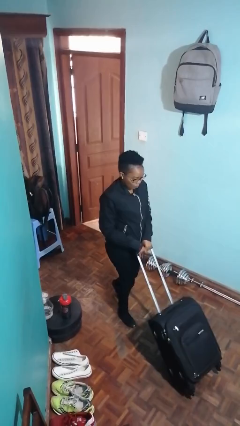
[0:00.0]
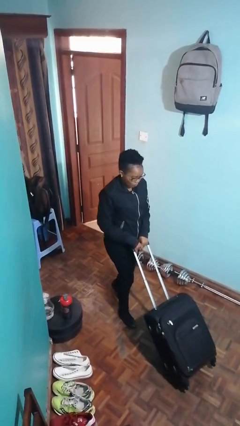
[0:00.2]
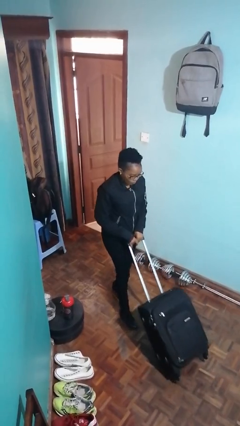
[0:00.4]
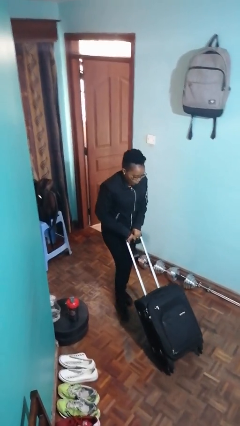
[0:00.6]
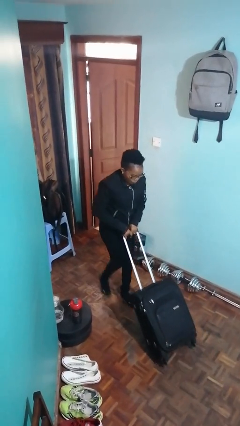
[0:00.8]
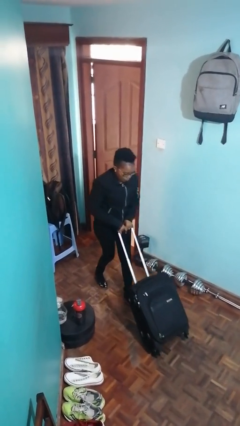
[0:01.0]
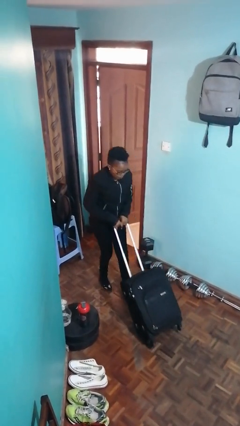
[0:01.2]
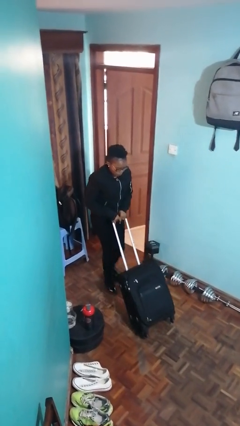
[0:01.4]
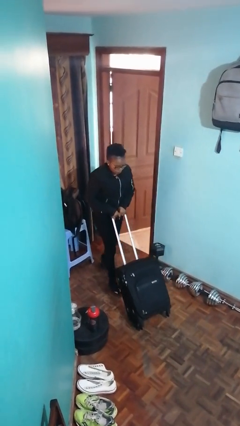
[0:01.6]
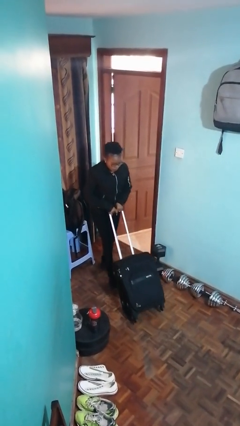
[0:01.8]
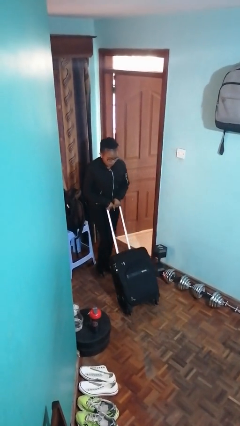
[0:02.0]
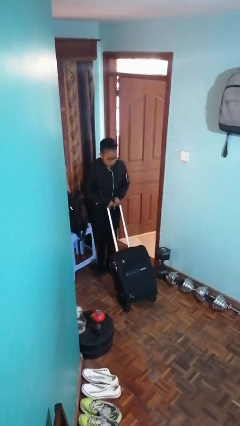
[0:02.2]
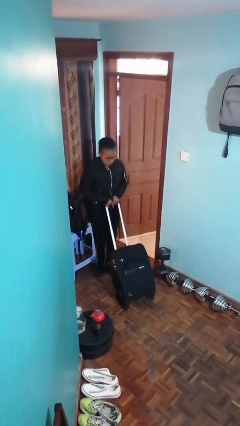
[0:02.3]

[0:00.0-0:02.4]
person pulls wheeled cart

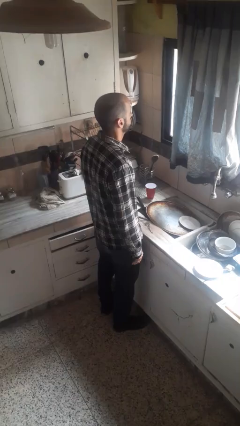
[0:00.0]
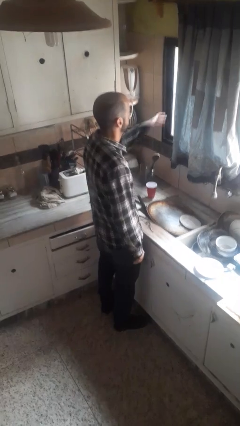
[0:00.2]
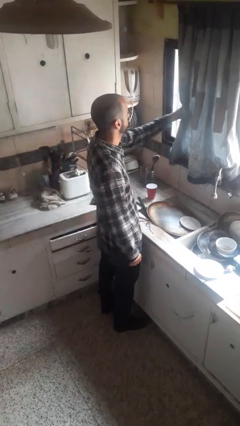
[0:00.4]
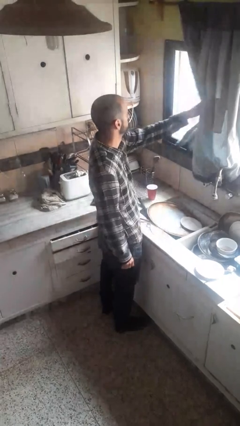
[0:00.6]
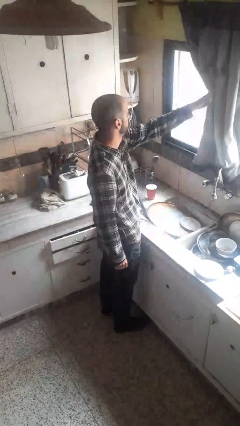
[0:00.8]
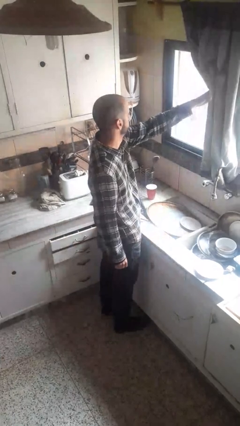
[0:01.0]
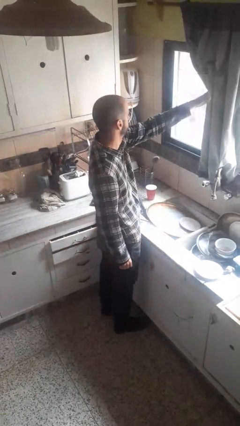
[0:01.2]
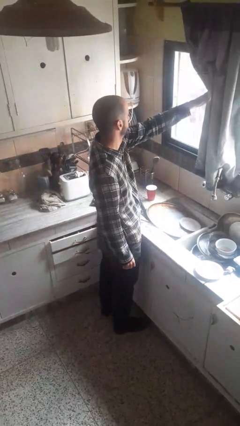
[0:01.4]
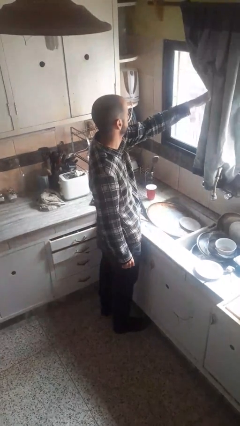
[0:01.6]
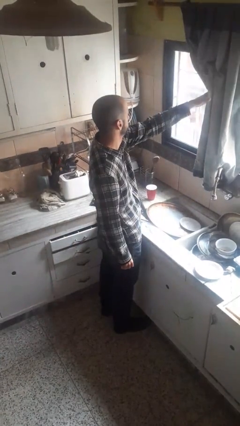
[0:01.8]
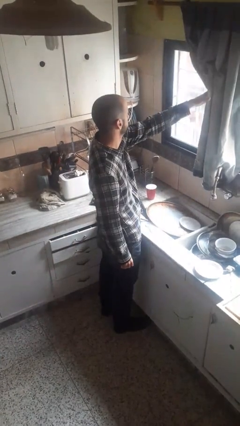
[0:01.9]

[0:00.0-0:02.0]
person opens curtains

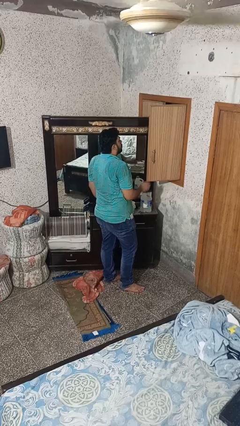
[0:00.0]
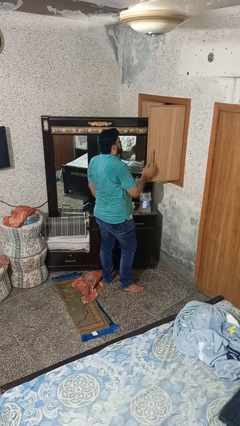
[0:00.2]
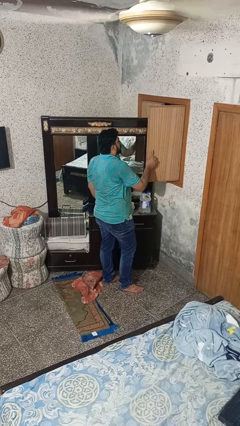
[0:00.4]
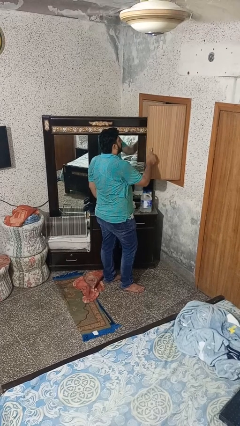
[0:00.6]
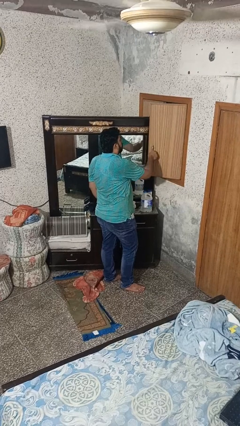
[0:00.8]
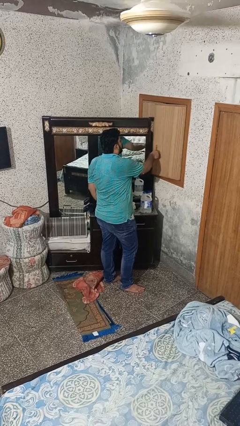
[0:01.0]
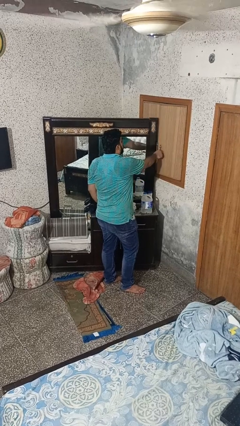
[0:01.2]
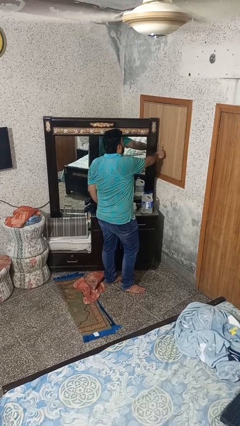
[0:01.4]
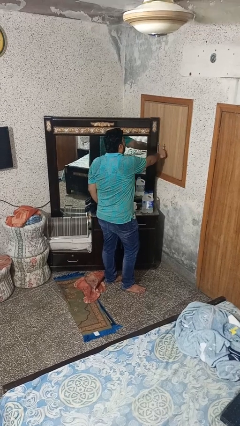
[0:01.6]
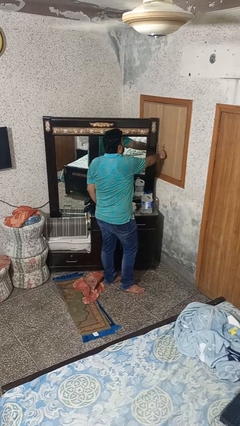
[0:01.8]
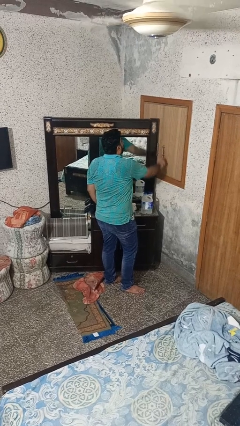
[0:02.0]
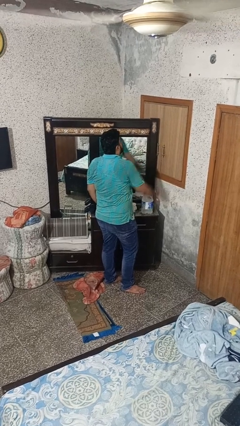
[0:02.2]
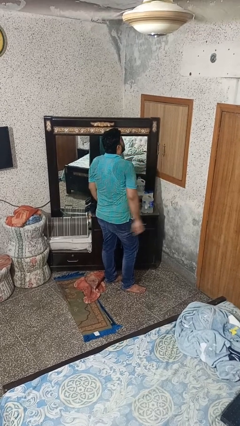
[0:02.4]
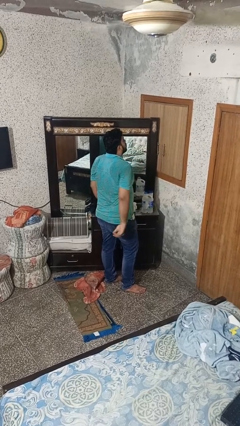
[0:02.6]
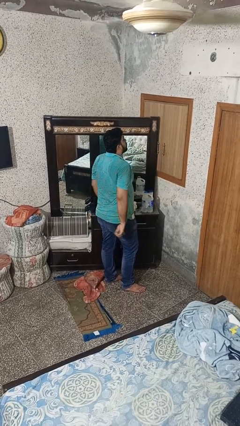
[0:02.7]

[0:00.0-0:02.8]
person closes home window

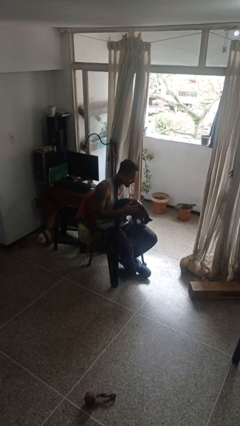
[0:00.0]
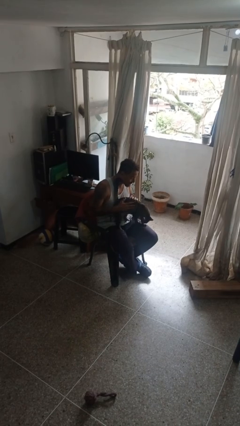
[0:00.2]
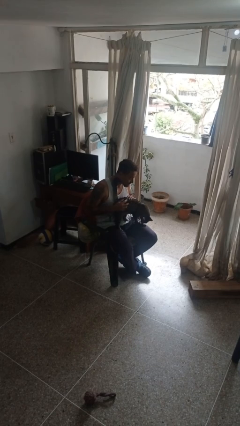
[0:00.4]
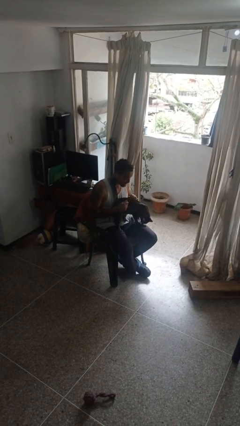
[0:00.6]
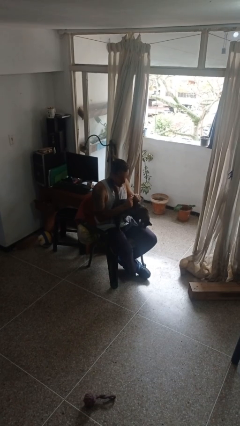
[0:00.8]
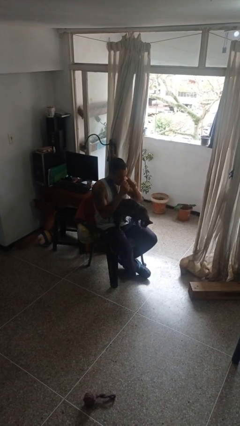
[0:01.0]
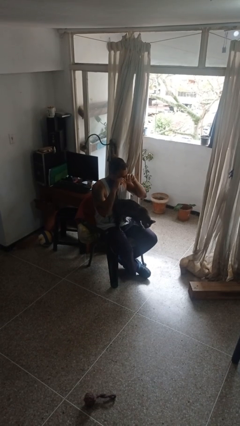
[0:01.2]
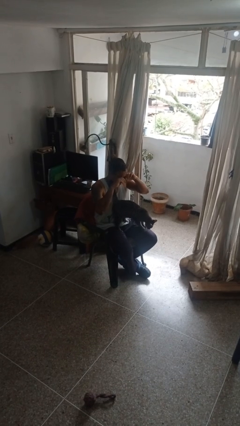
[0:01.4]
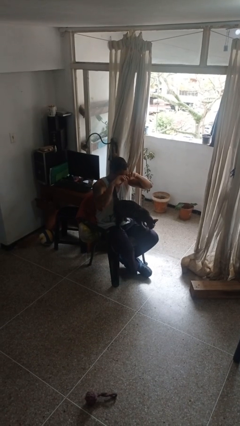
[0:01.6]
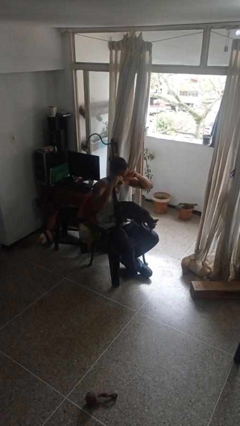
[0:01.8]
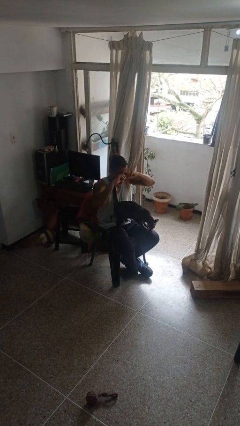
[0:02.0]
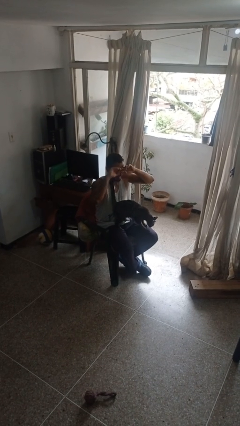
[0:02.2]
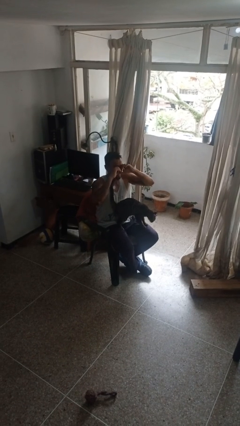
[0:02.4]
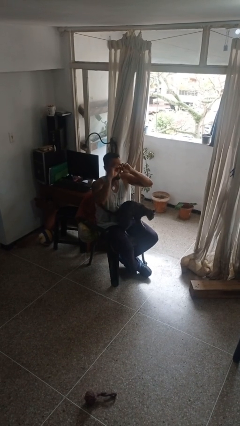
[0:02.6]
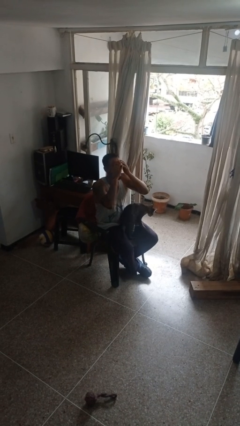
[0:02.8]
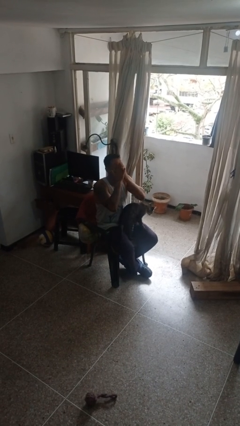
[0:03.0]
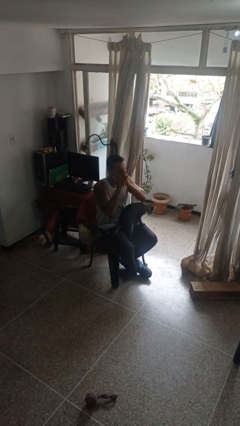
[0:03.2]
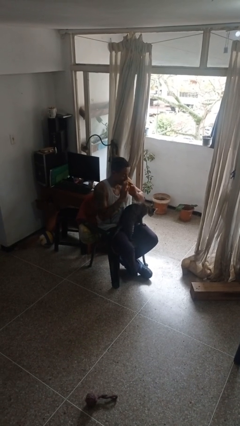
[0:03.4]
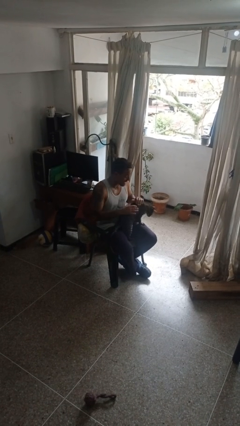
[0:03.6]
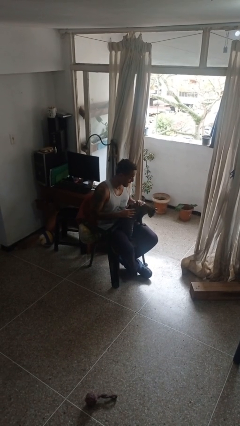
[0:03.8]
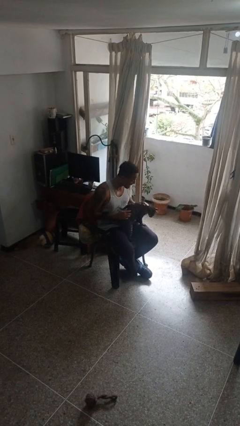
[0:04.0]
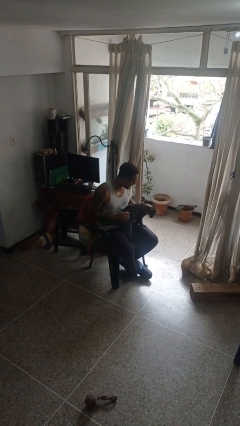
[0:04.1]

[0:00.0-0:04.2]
person rubs eyes

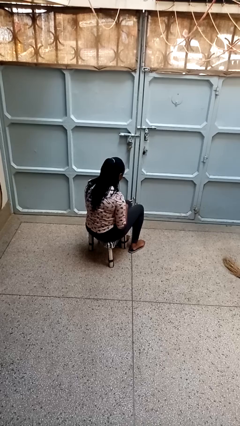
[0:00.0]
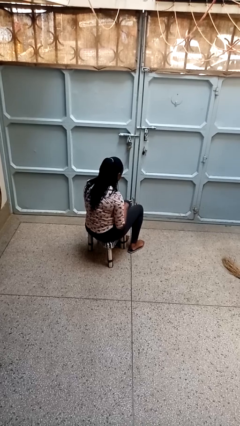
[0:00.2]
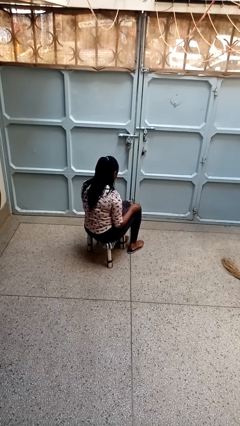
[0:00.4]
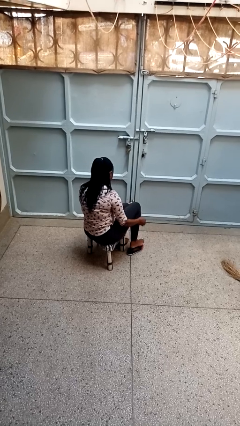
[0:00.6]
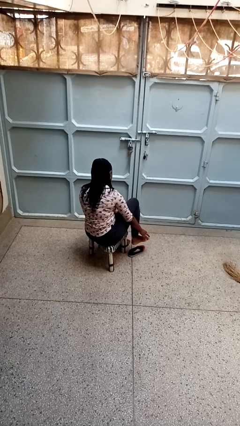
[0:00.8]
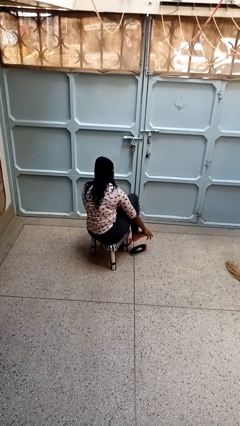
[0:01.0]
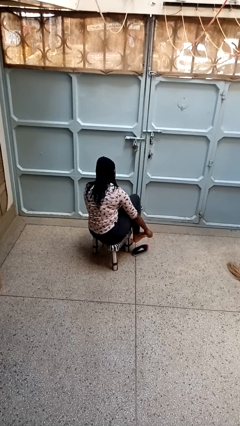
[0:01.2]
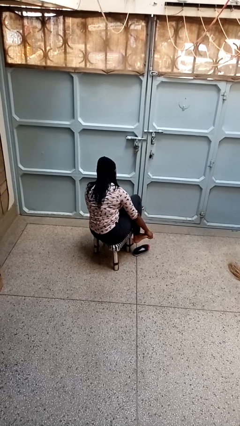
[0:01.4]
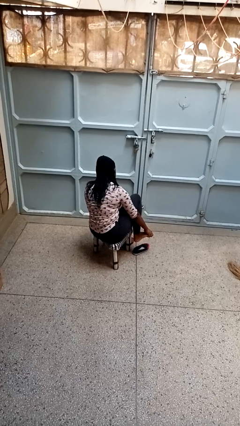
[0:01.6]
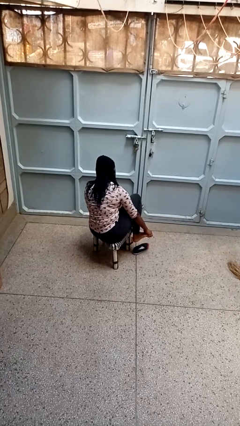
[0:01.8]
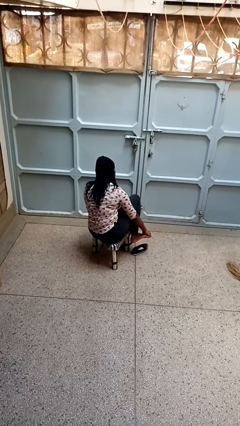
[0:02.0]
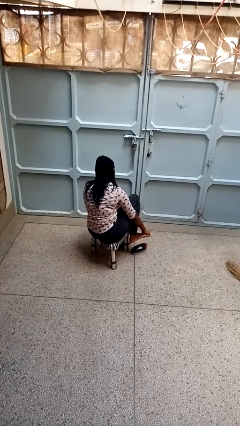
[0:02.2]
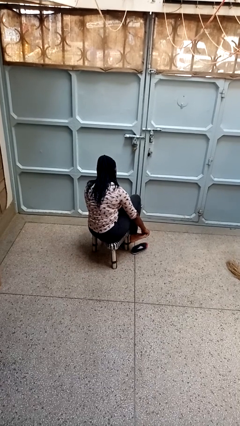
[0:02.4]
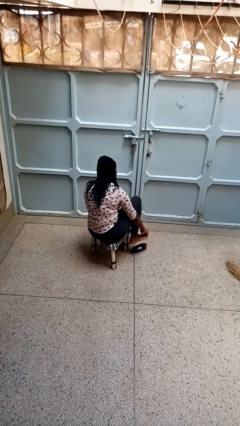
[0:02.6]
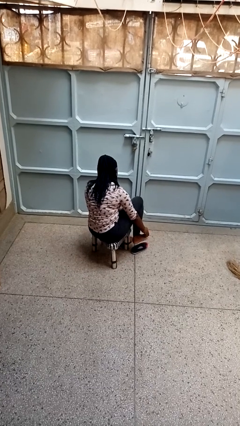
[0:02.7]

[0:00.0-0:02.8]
person rubs foot

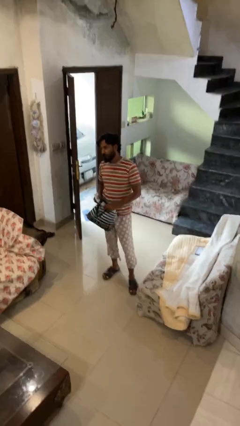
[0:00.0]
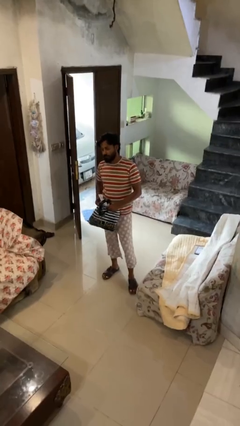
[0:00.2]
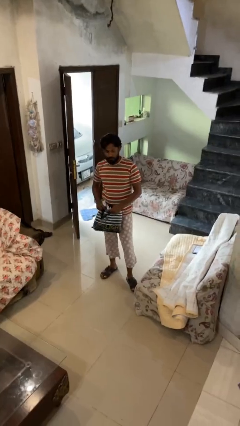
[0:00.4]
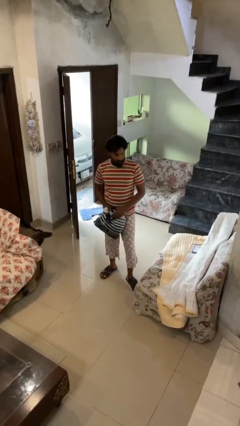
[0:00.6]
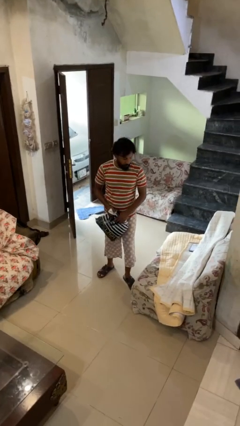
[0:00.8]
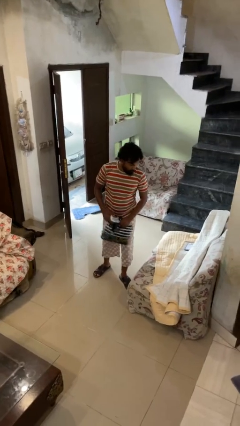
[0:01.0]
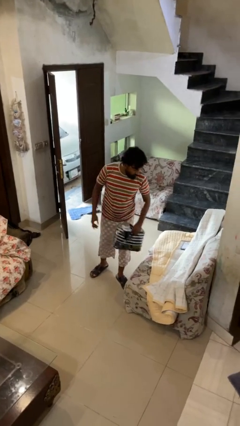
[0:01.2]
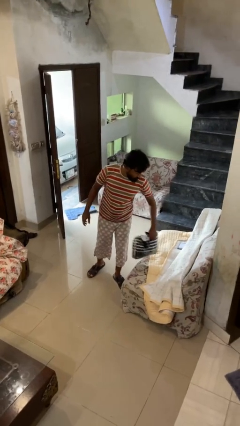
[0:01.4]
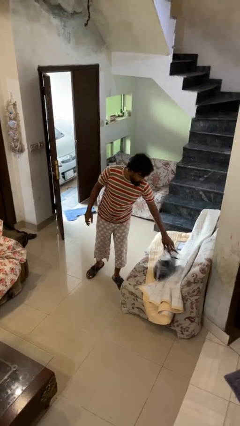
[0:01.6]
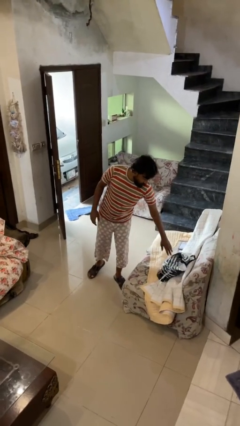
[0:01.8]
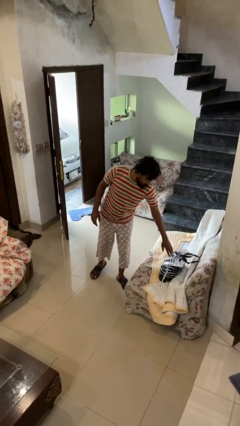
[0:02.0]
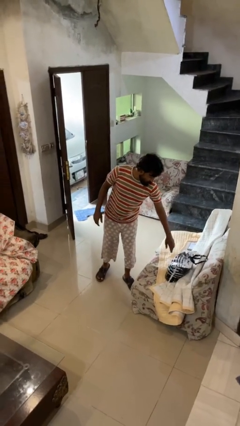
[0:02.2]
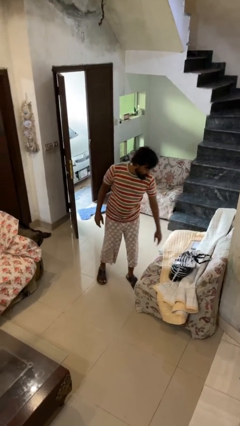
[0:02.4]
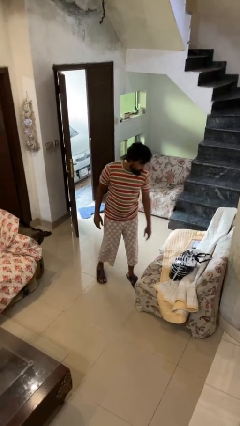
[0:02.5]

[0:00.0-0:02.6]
person puts down object on couch

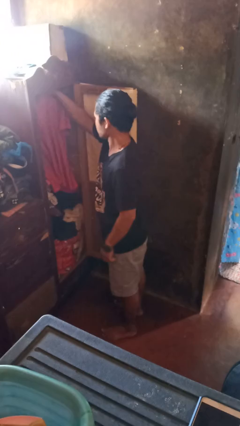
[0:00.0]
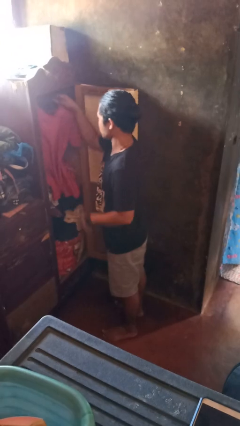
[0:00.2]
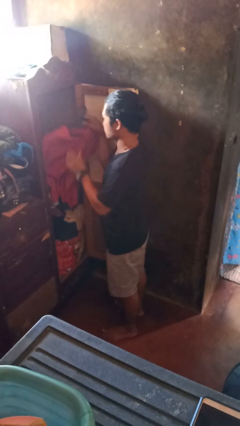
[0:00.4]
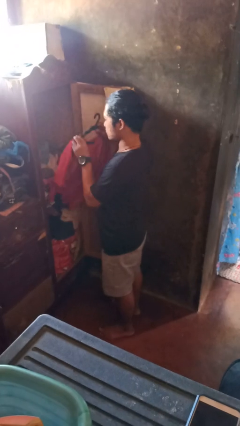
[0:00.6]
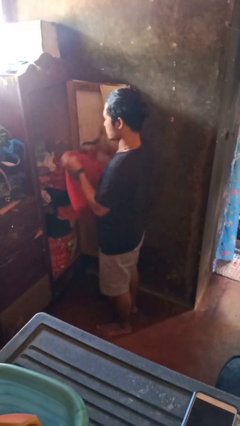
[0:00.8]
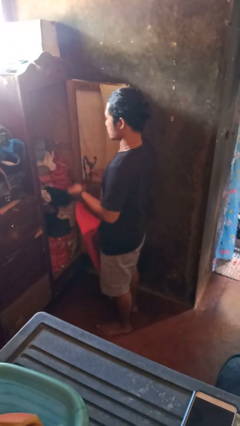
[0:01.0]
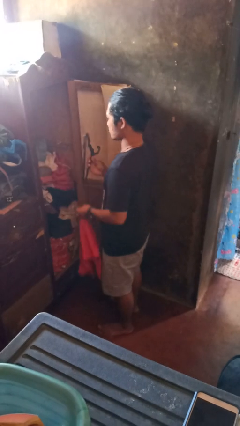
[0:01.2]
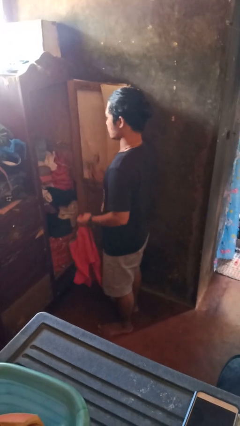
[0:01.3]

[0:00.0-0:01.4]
person takes clothes from closet
